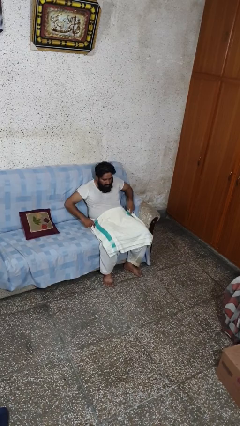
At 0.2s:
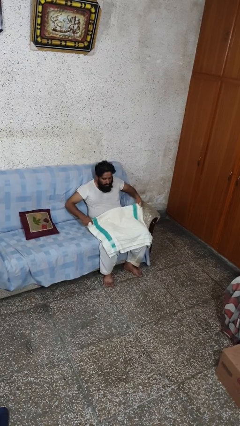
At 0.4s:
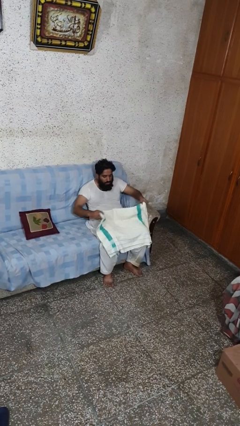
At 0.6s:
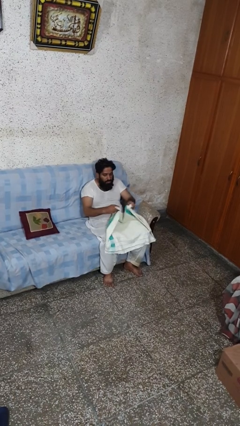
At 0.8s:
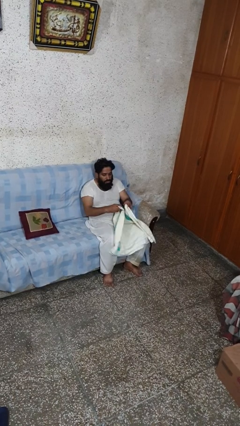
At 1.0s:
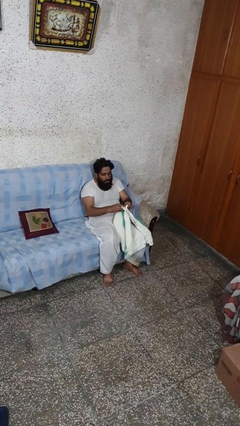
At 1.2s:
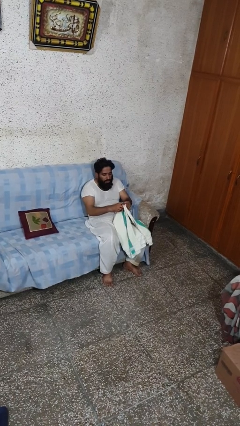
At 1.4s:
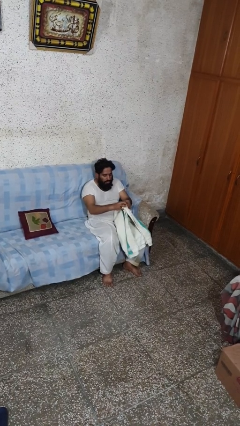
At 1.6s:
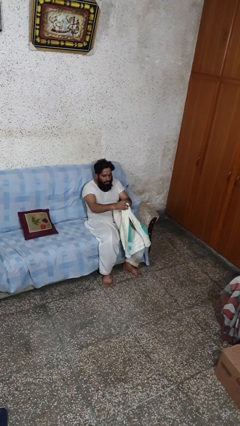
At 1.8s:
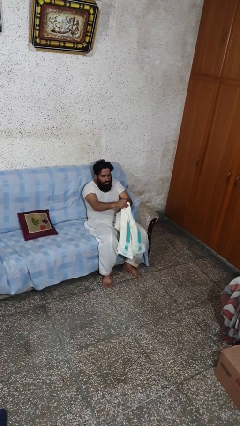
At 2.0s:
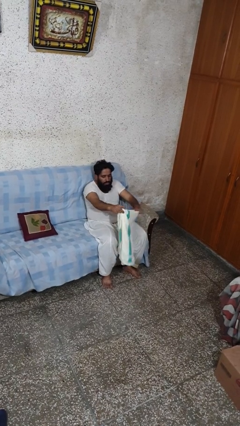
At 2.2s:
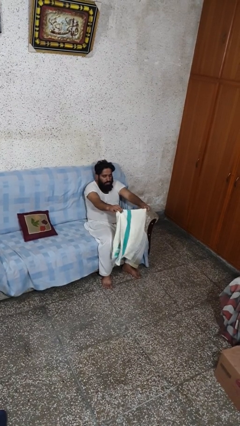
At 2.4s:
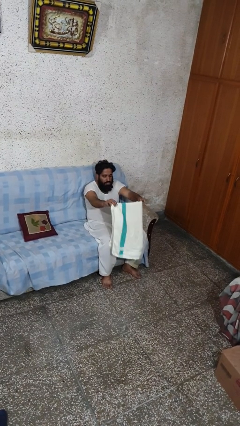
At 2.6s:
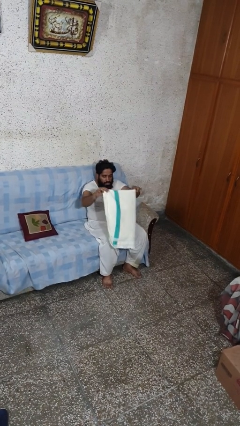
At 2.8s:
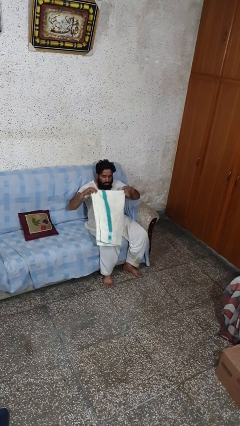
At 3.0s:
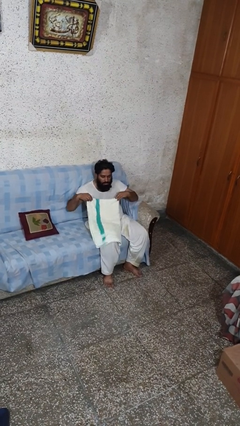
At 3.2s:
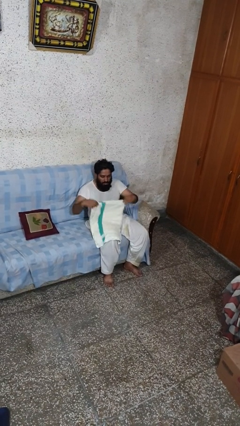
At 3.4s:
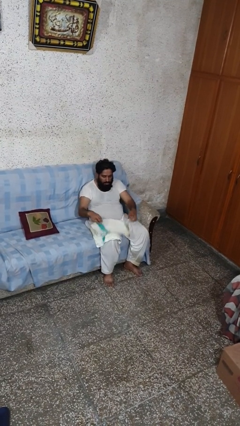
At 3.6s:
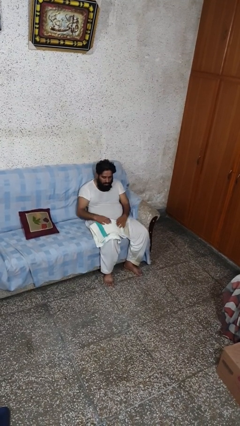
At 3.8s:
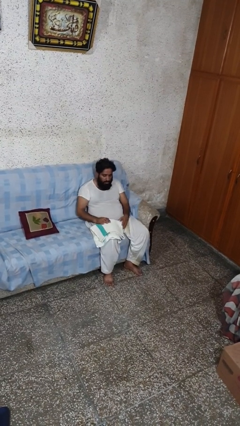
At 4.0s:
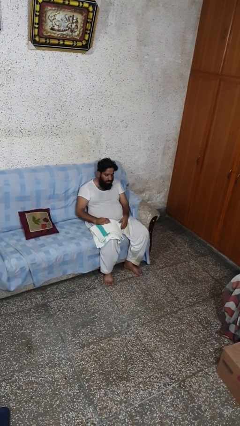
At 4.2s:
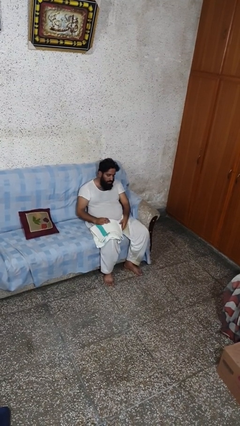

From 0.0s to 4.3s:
person folds towel

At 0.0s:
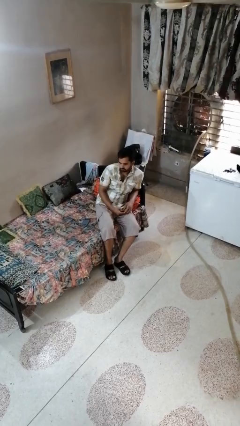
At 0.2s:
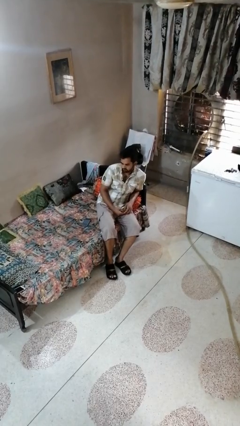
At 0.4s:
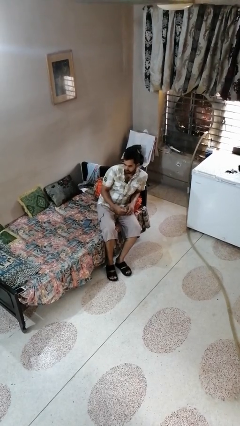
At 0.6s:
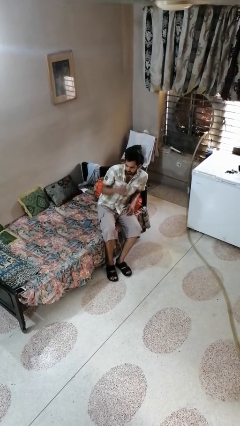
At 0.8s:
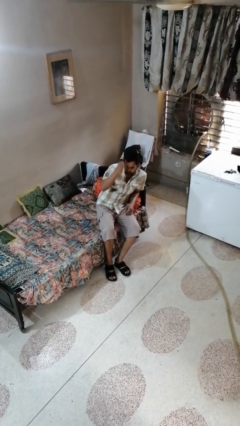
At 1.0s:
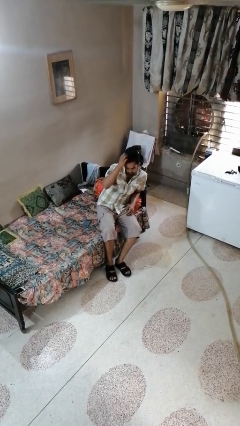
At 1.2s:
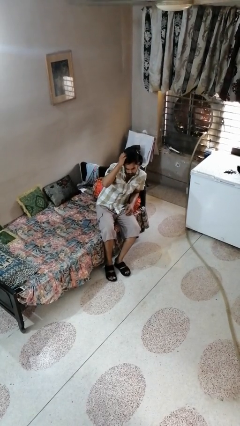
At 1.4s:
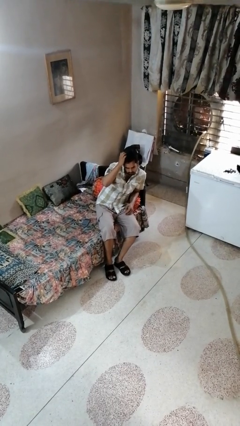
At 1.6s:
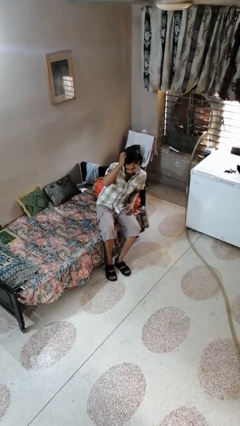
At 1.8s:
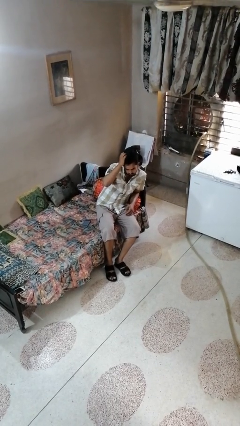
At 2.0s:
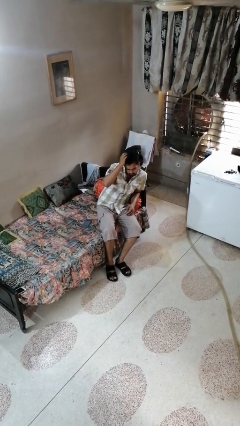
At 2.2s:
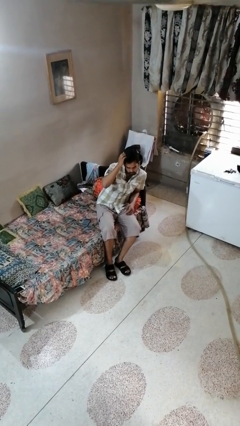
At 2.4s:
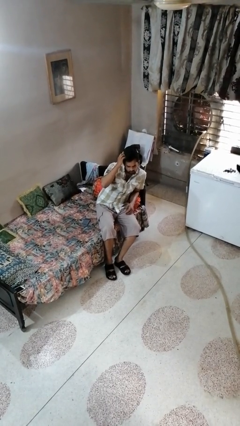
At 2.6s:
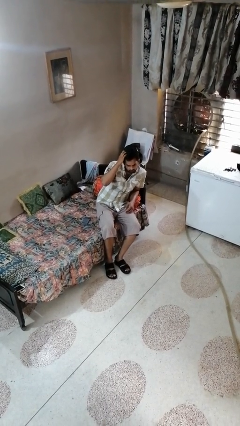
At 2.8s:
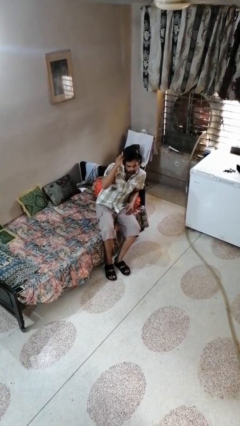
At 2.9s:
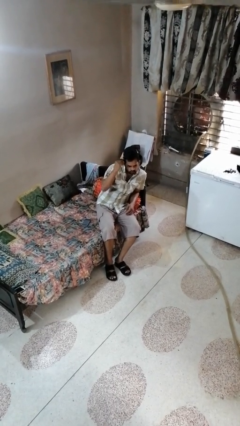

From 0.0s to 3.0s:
person scratches face

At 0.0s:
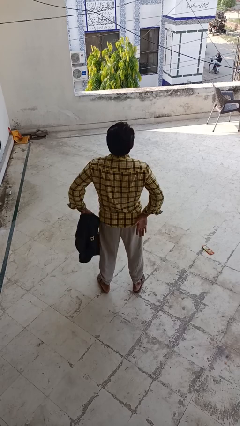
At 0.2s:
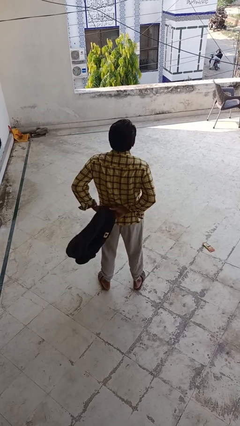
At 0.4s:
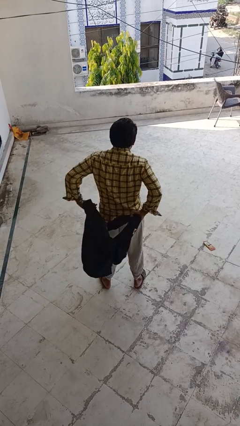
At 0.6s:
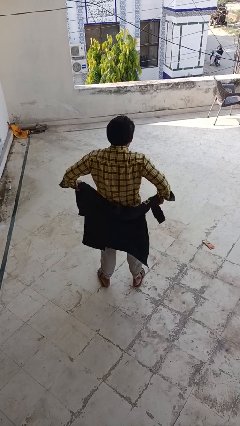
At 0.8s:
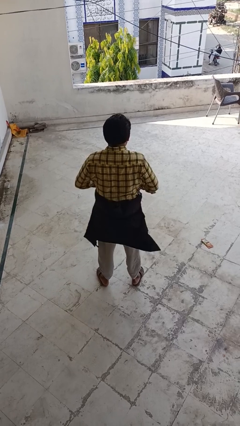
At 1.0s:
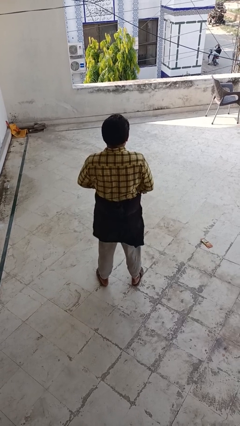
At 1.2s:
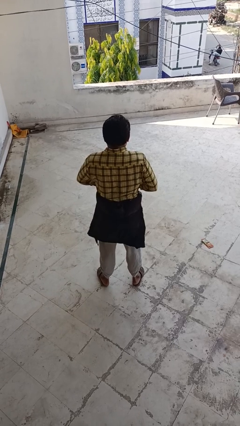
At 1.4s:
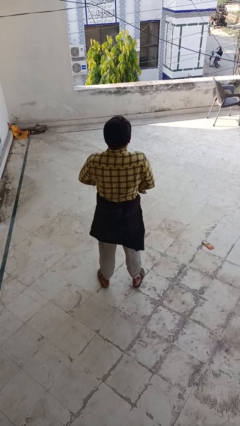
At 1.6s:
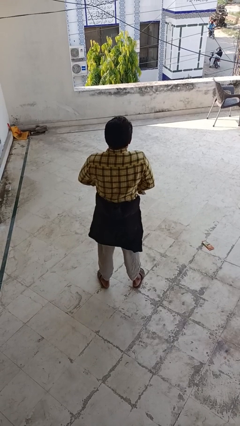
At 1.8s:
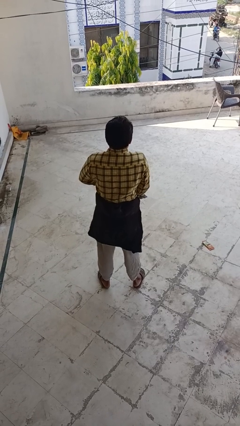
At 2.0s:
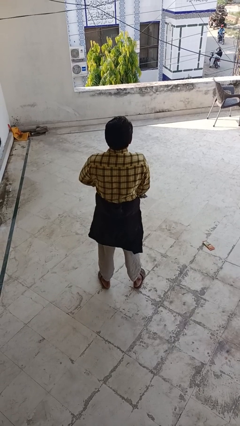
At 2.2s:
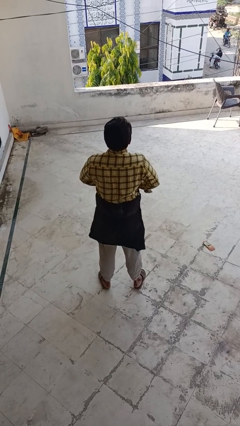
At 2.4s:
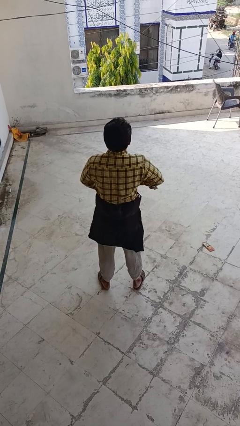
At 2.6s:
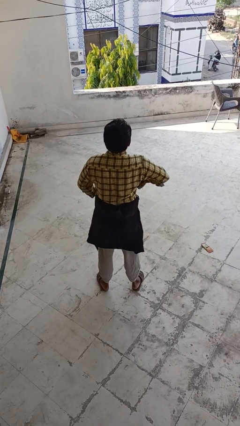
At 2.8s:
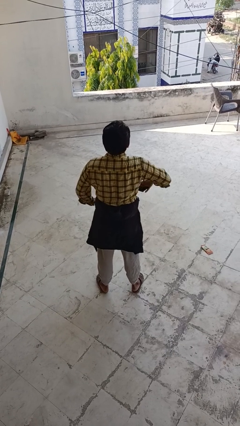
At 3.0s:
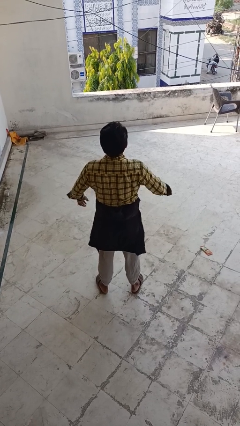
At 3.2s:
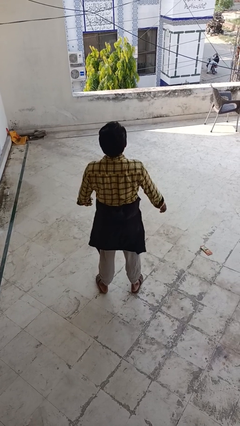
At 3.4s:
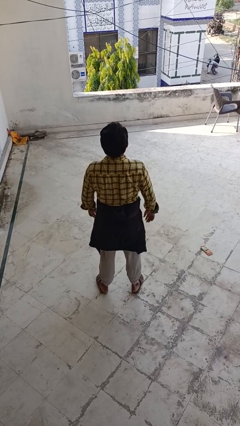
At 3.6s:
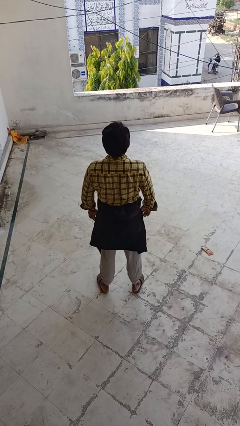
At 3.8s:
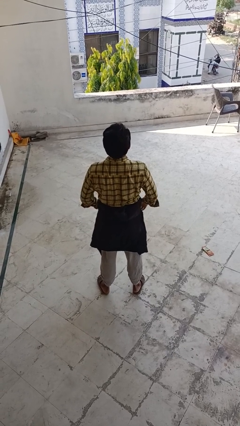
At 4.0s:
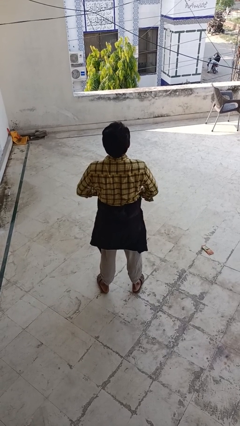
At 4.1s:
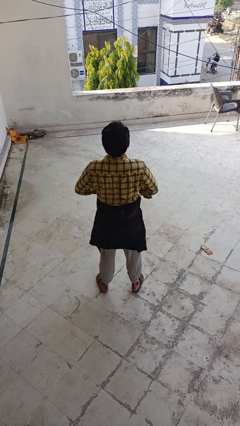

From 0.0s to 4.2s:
person ties jacket around waist

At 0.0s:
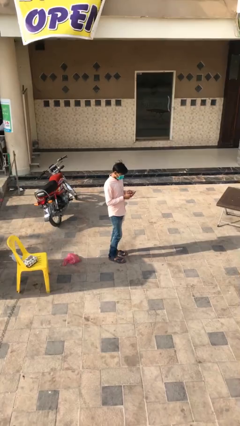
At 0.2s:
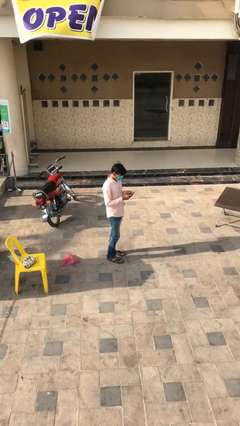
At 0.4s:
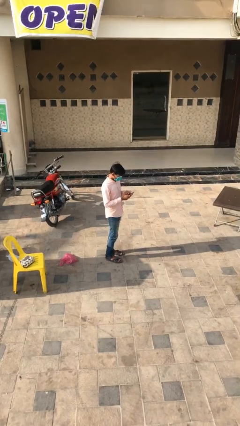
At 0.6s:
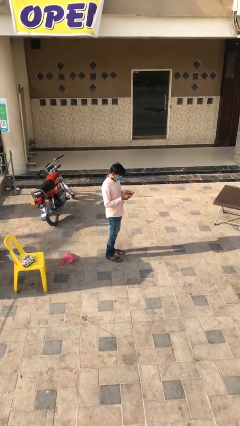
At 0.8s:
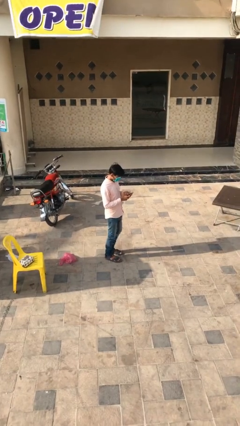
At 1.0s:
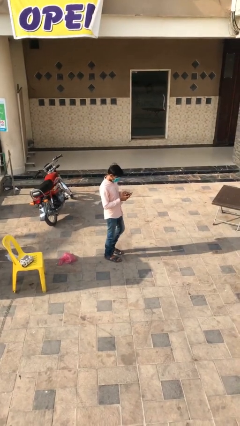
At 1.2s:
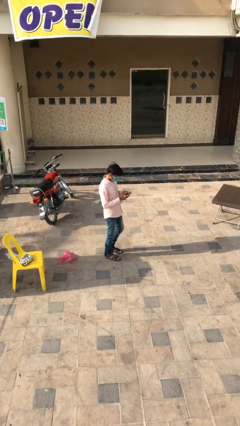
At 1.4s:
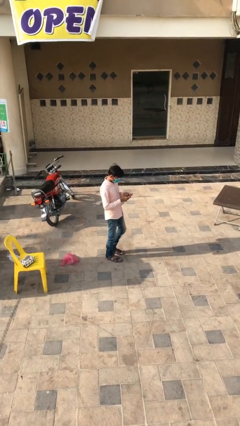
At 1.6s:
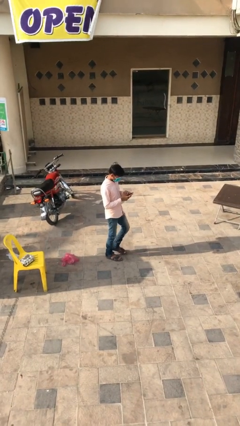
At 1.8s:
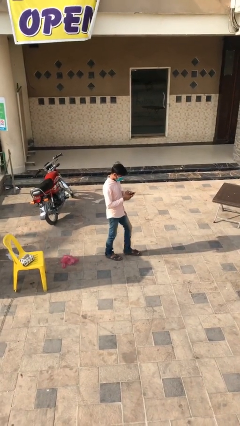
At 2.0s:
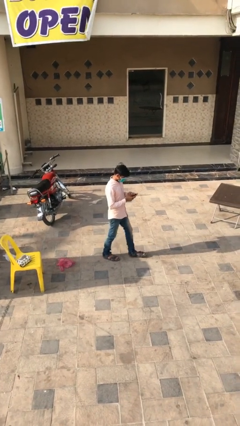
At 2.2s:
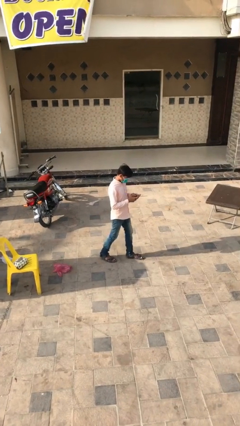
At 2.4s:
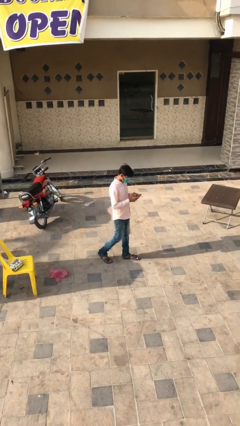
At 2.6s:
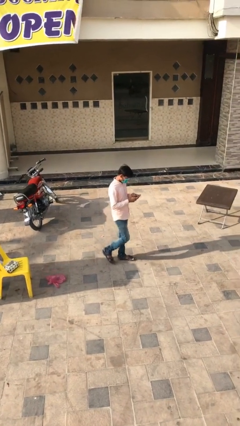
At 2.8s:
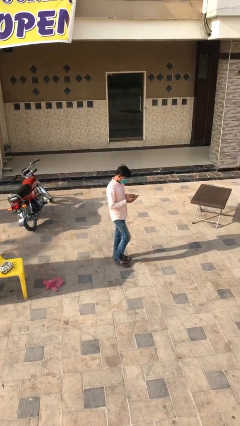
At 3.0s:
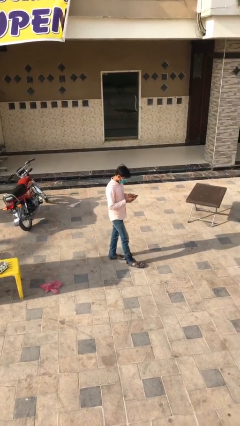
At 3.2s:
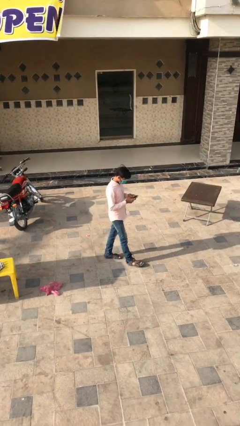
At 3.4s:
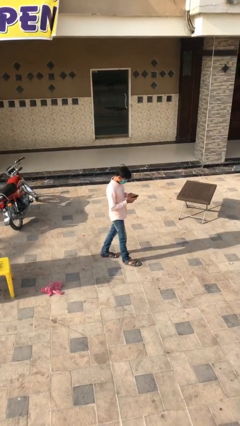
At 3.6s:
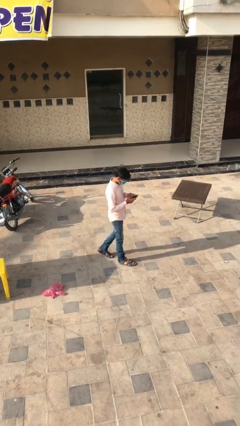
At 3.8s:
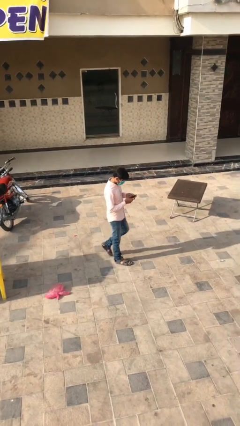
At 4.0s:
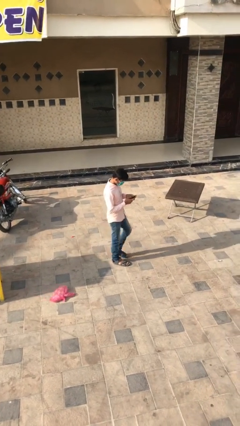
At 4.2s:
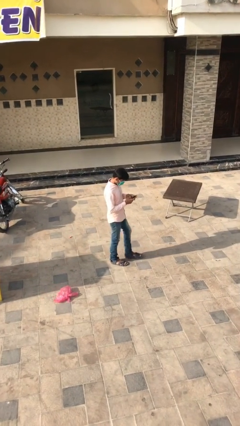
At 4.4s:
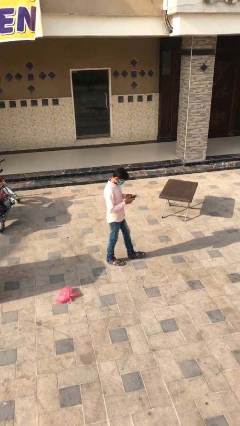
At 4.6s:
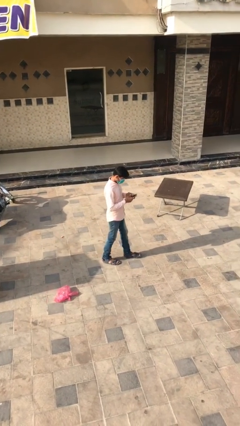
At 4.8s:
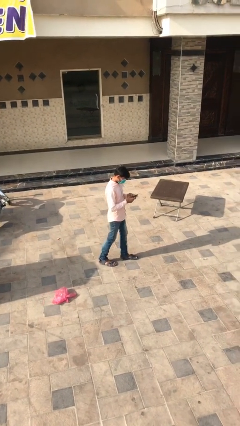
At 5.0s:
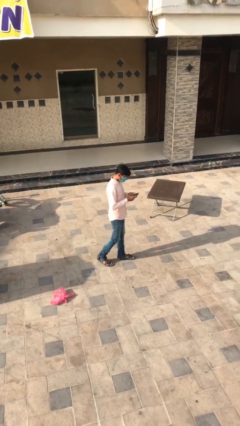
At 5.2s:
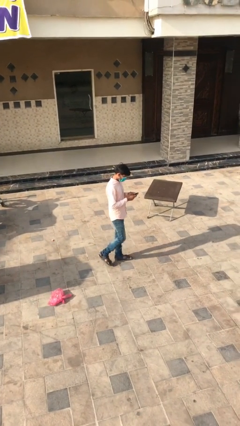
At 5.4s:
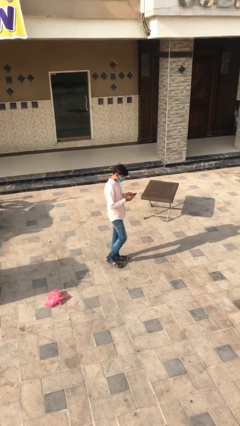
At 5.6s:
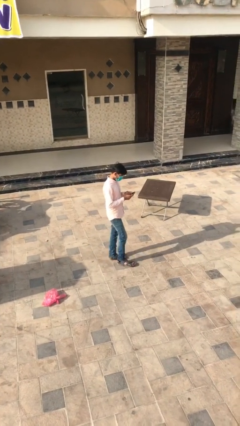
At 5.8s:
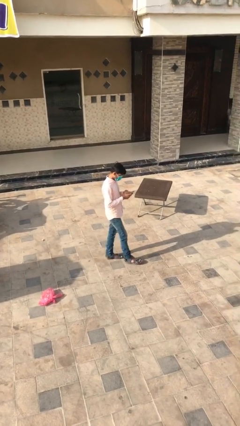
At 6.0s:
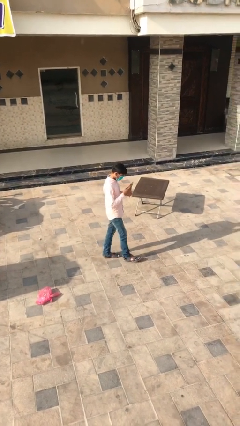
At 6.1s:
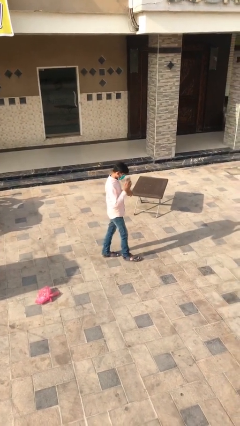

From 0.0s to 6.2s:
person texts on phone

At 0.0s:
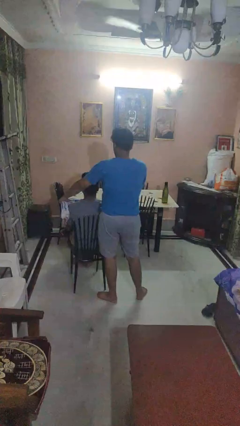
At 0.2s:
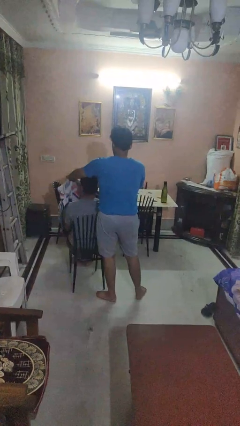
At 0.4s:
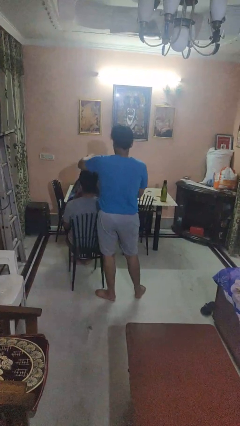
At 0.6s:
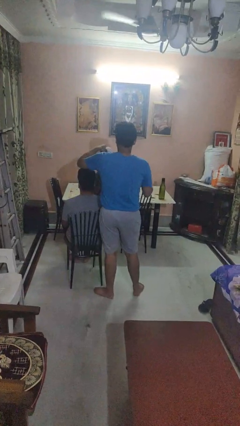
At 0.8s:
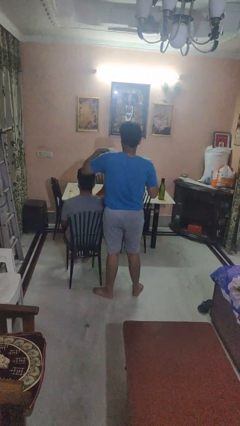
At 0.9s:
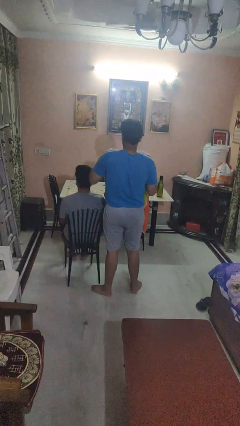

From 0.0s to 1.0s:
person uncovers friend with blanket
